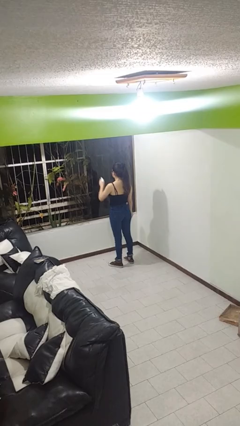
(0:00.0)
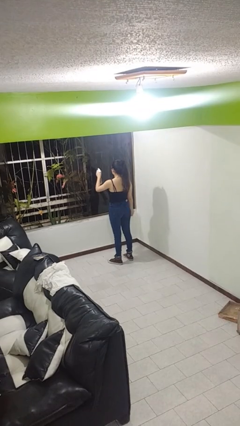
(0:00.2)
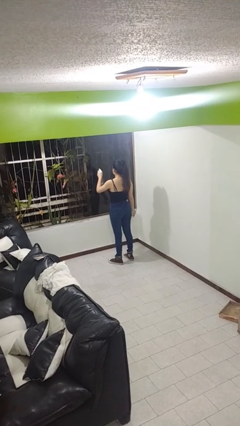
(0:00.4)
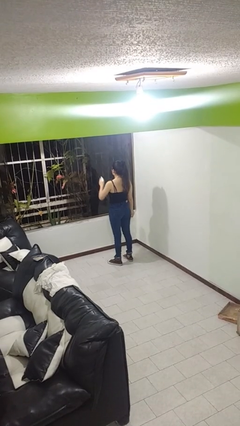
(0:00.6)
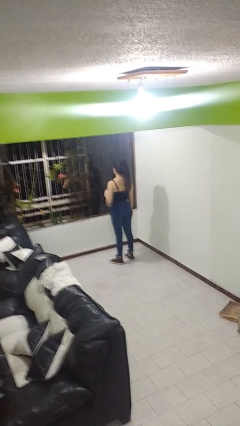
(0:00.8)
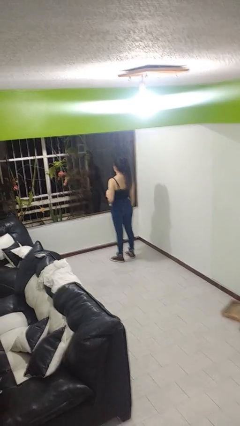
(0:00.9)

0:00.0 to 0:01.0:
person sprays from bottle

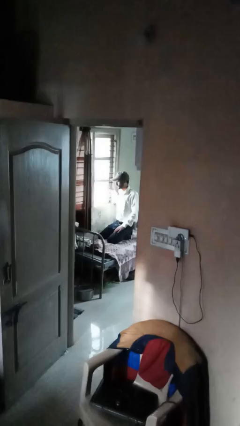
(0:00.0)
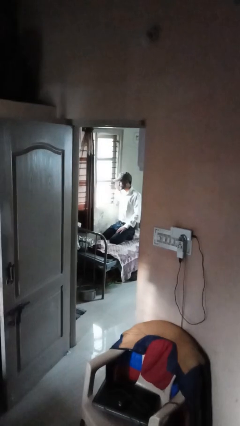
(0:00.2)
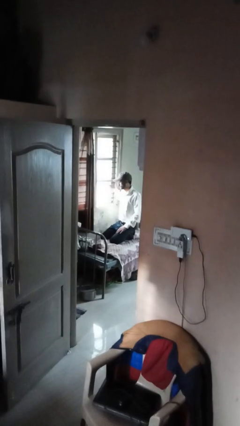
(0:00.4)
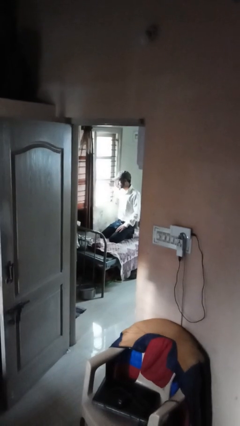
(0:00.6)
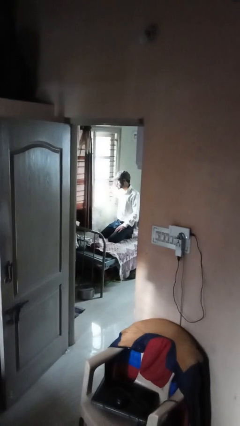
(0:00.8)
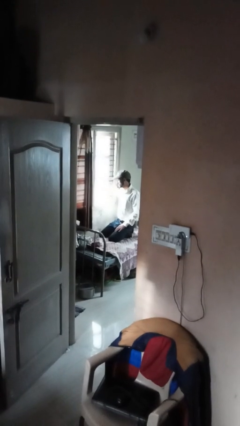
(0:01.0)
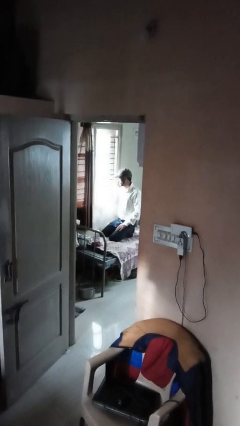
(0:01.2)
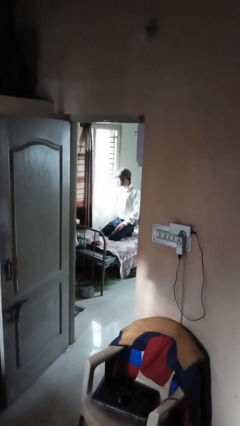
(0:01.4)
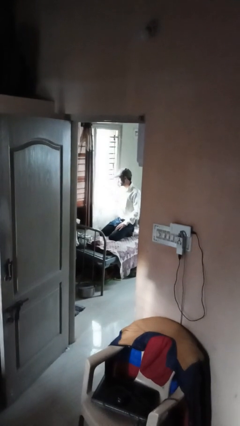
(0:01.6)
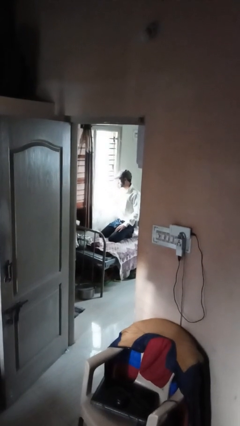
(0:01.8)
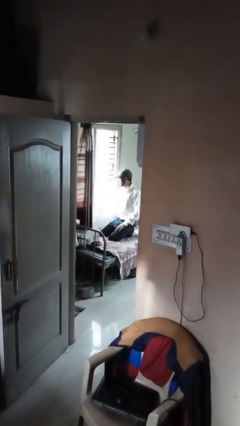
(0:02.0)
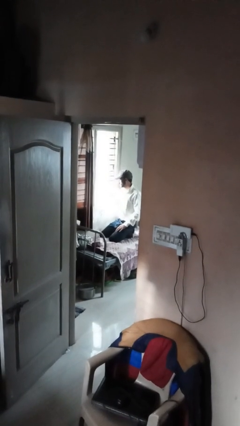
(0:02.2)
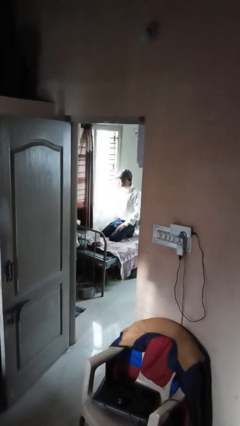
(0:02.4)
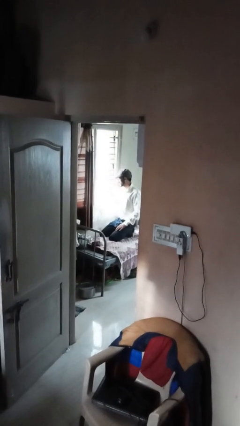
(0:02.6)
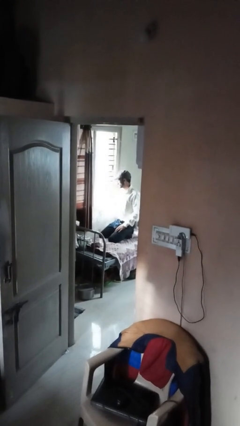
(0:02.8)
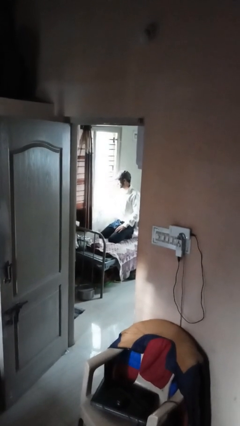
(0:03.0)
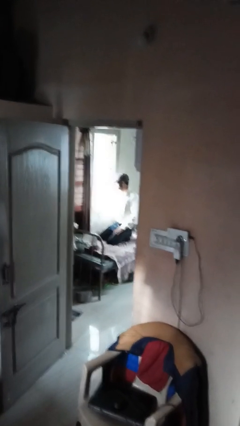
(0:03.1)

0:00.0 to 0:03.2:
person opens home window

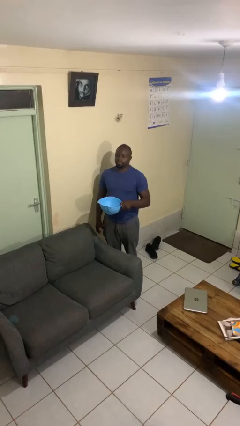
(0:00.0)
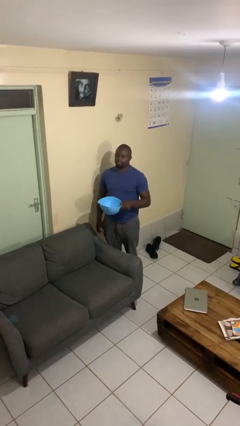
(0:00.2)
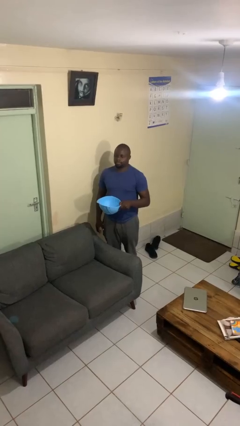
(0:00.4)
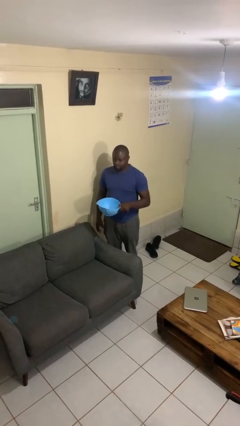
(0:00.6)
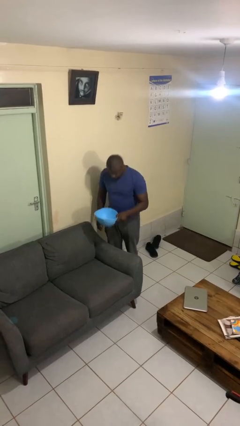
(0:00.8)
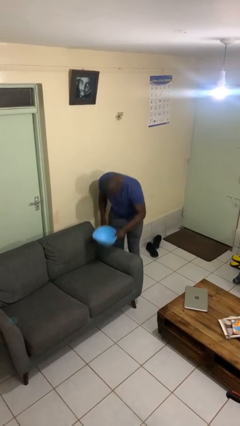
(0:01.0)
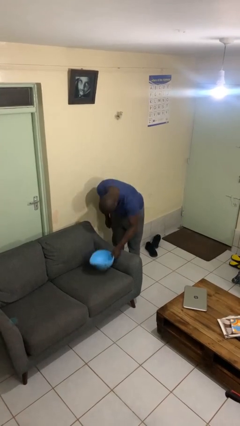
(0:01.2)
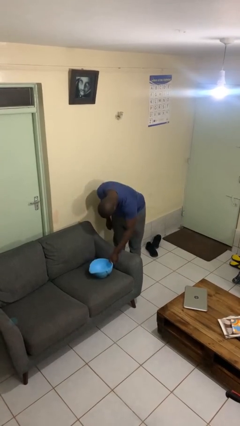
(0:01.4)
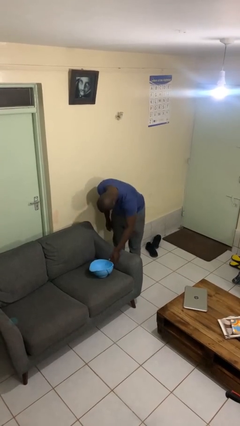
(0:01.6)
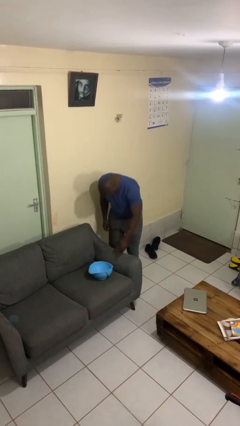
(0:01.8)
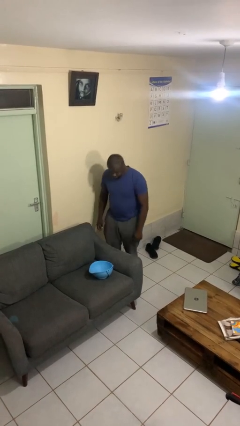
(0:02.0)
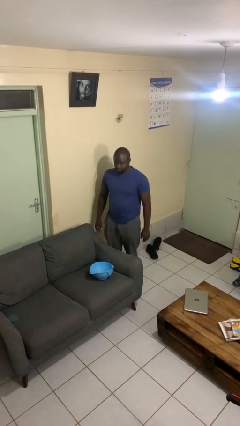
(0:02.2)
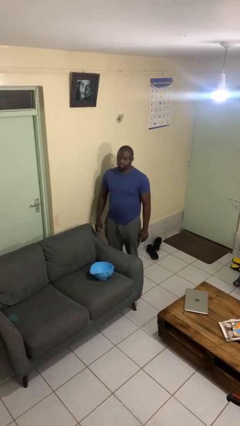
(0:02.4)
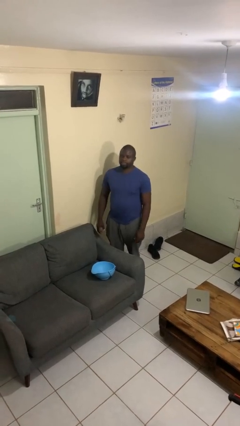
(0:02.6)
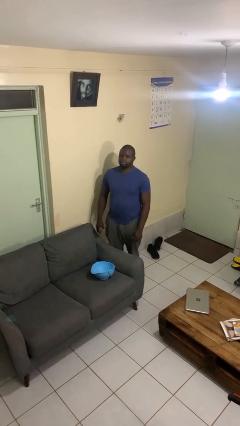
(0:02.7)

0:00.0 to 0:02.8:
person puts down object on couch

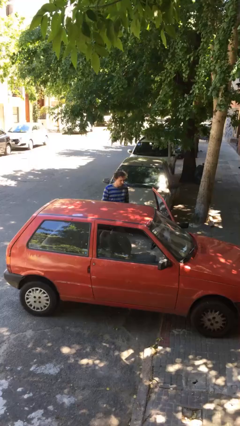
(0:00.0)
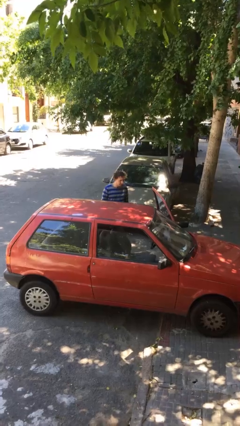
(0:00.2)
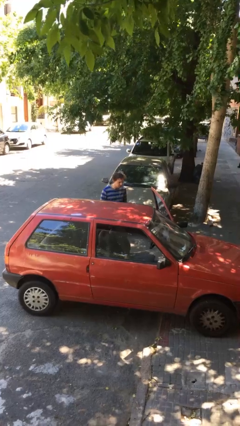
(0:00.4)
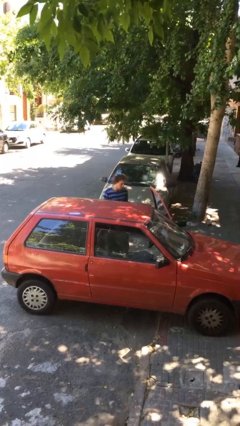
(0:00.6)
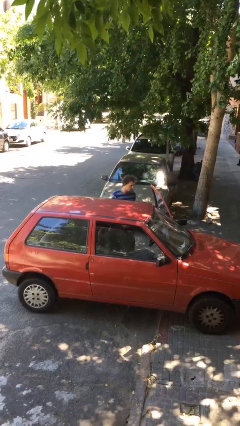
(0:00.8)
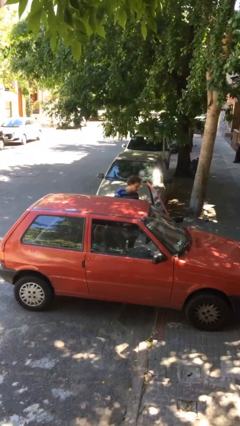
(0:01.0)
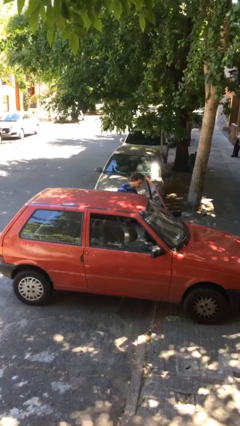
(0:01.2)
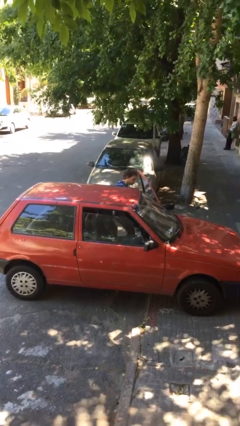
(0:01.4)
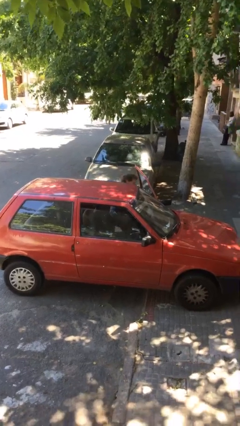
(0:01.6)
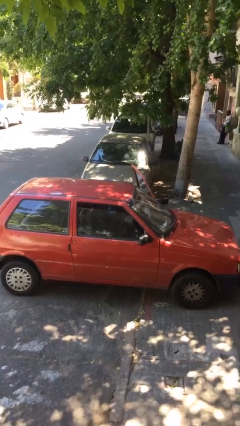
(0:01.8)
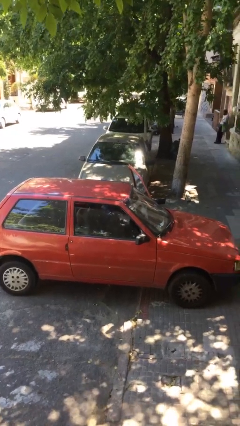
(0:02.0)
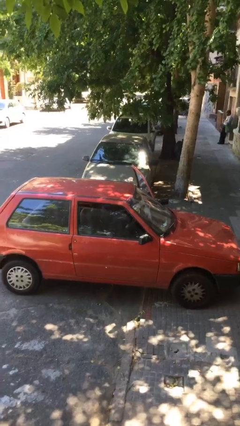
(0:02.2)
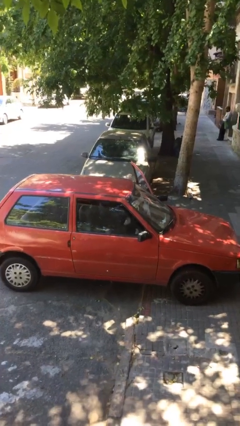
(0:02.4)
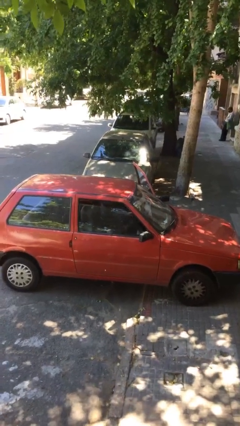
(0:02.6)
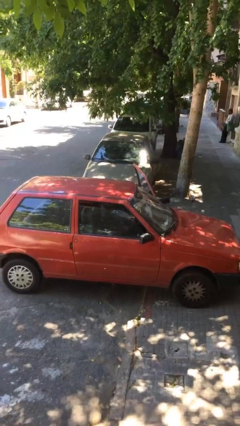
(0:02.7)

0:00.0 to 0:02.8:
person enters car

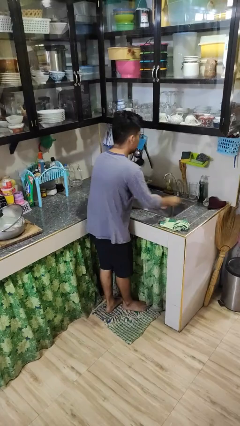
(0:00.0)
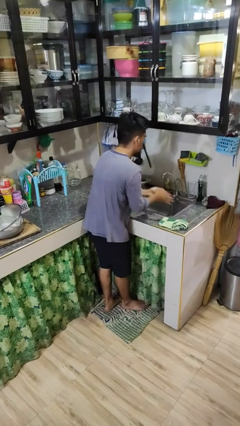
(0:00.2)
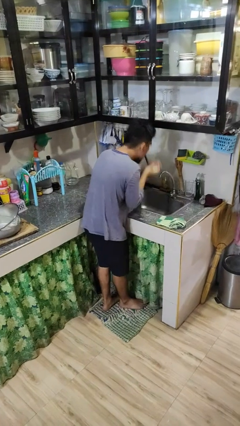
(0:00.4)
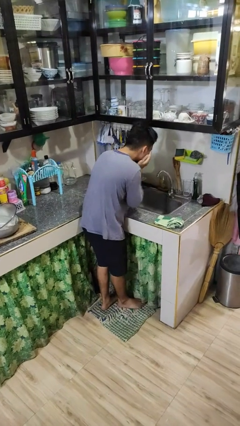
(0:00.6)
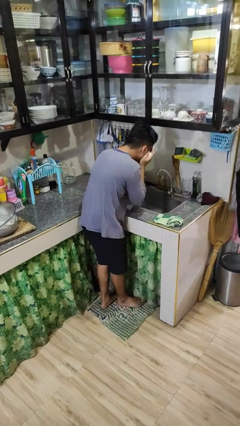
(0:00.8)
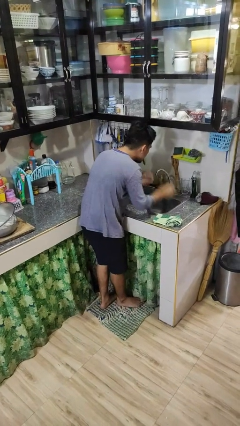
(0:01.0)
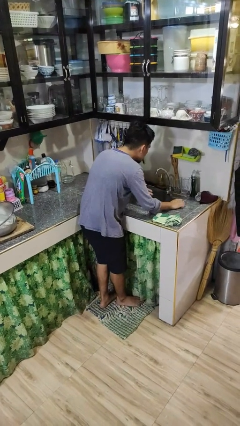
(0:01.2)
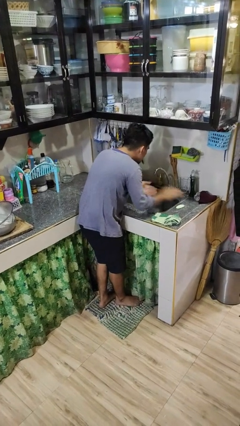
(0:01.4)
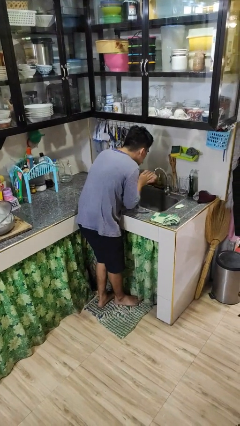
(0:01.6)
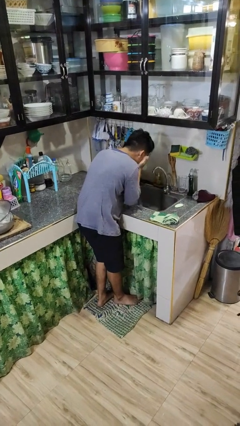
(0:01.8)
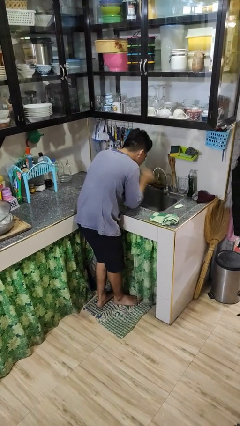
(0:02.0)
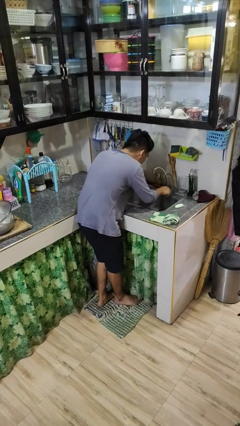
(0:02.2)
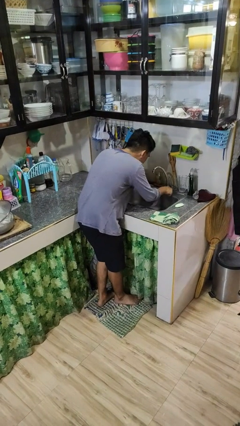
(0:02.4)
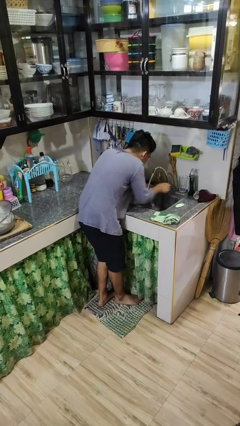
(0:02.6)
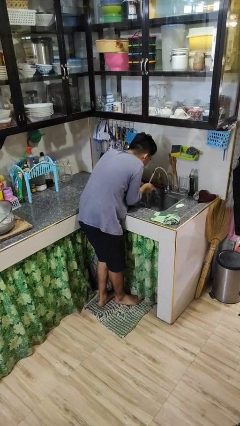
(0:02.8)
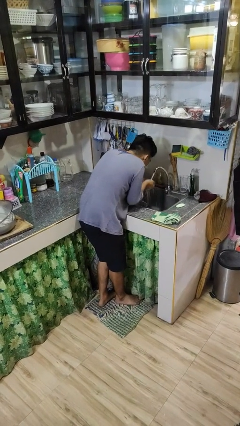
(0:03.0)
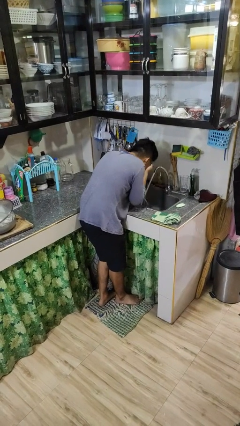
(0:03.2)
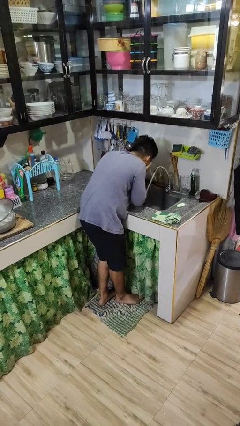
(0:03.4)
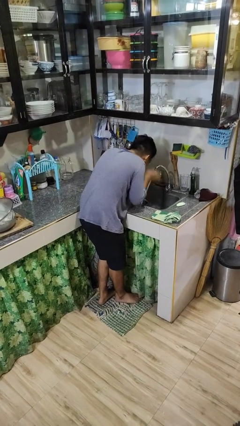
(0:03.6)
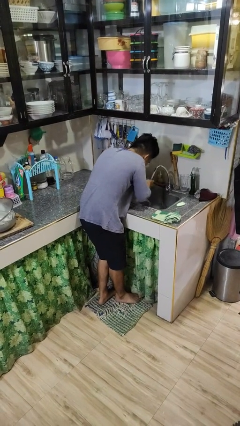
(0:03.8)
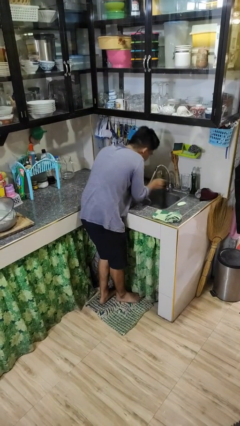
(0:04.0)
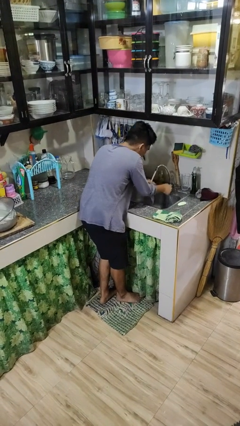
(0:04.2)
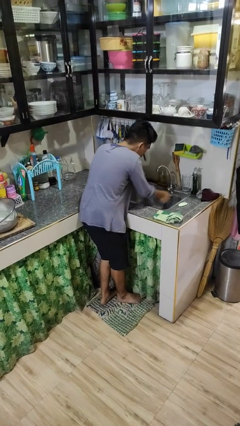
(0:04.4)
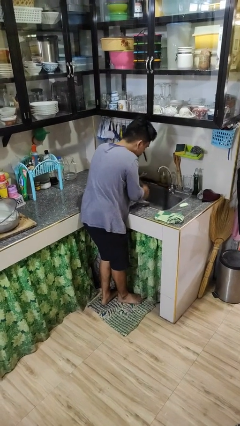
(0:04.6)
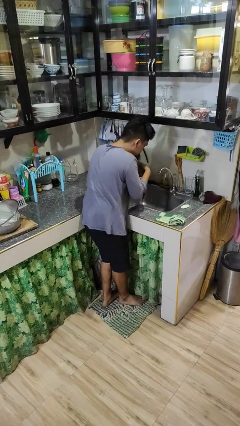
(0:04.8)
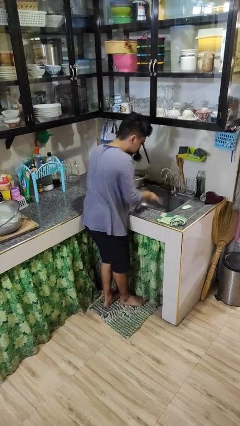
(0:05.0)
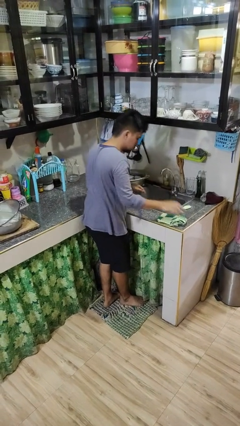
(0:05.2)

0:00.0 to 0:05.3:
person washes face

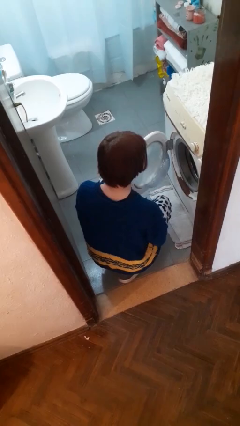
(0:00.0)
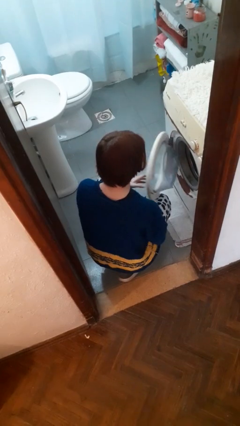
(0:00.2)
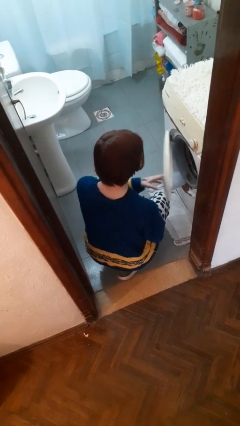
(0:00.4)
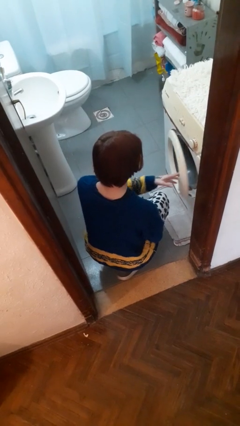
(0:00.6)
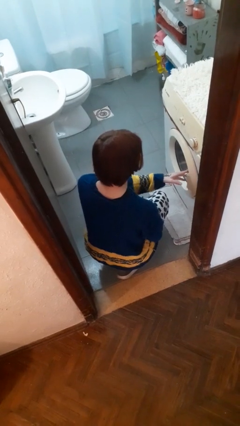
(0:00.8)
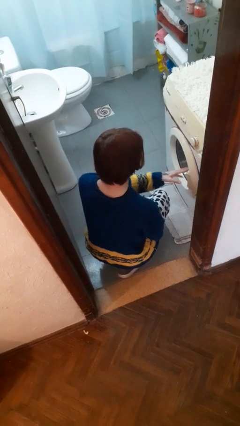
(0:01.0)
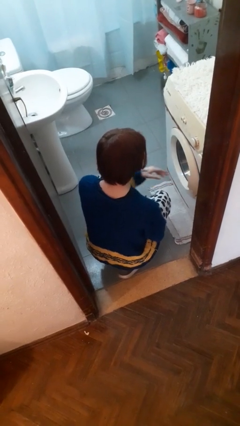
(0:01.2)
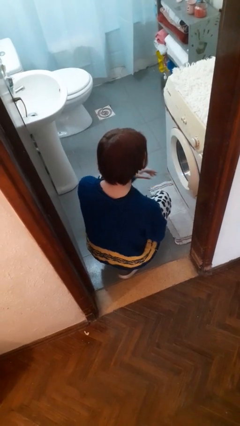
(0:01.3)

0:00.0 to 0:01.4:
person closes clothes washer

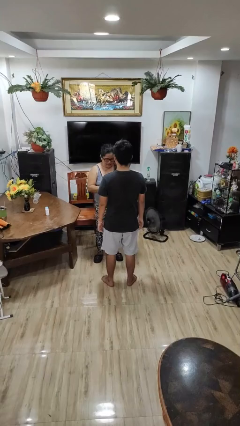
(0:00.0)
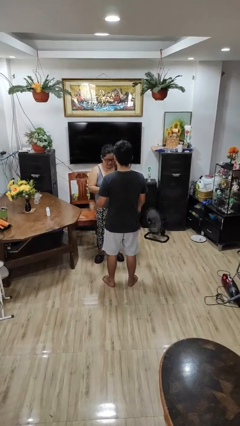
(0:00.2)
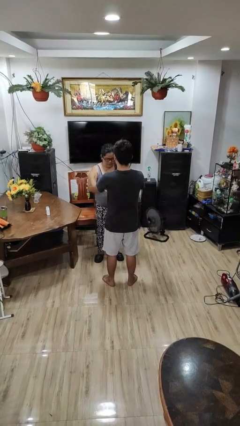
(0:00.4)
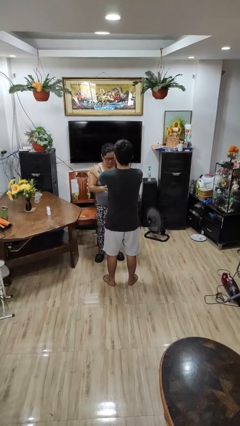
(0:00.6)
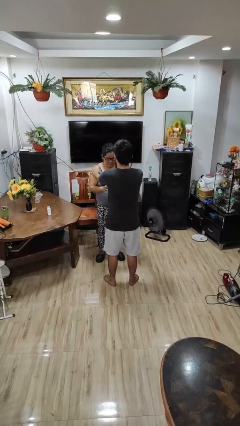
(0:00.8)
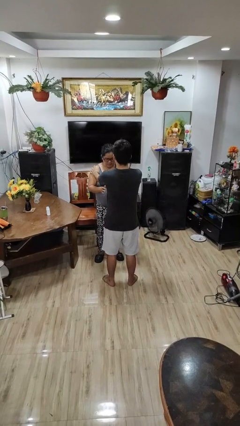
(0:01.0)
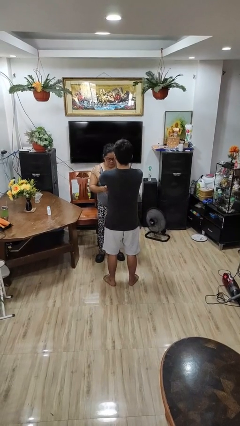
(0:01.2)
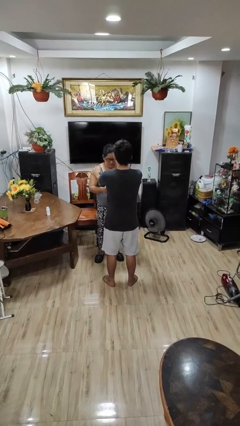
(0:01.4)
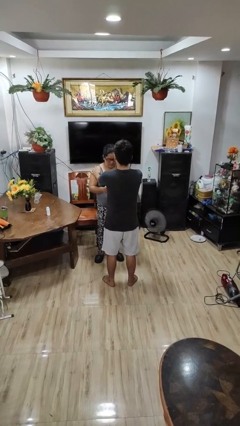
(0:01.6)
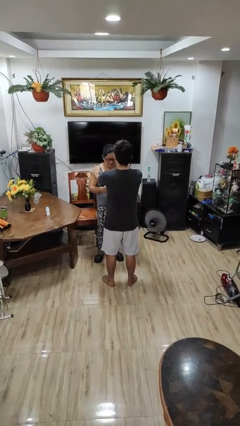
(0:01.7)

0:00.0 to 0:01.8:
person grabs person by shoulder
